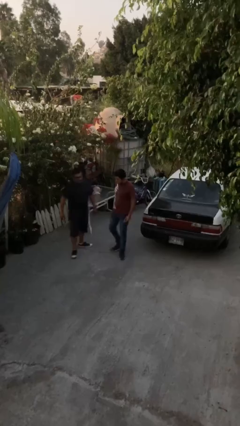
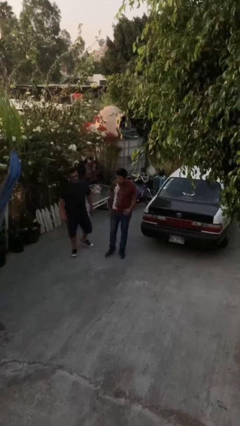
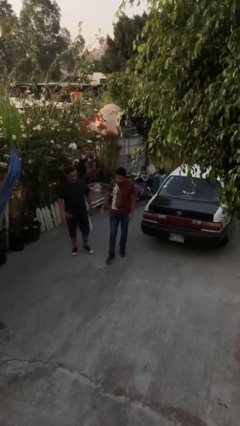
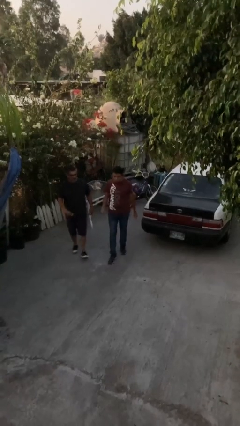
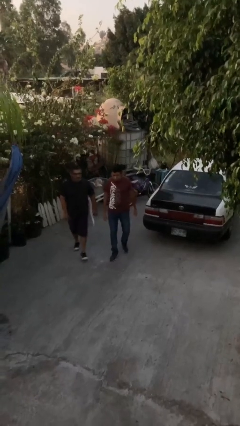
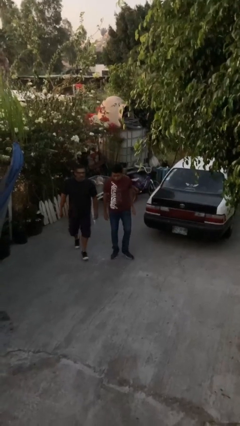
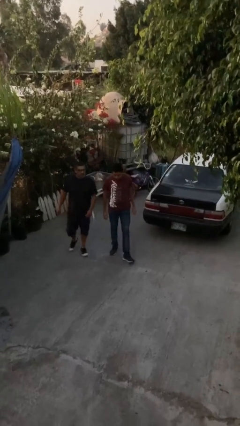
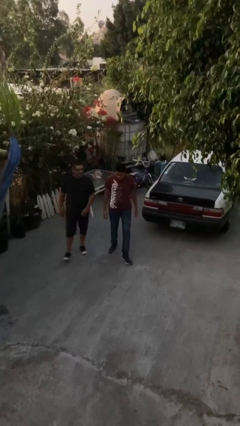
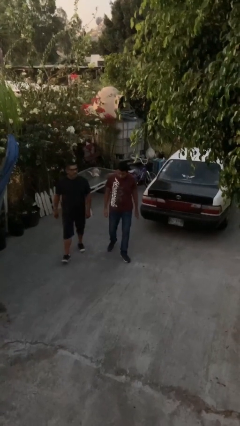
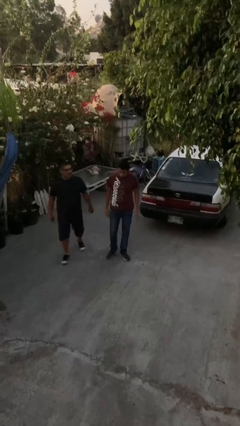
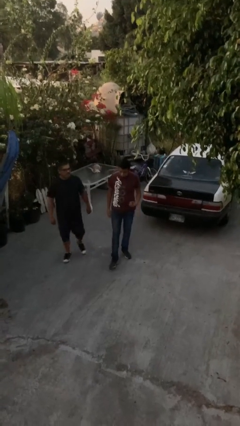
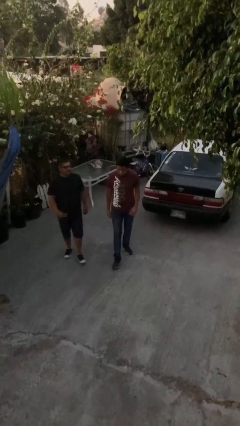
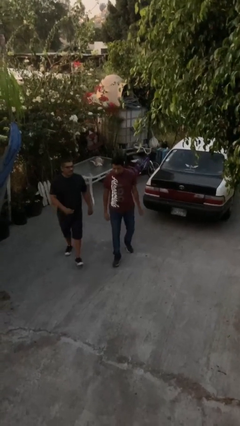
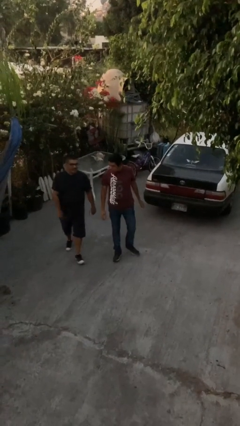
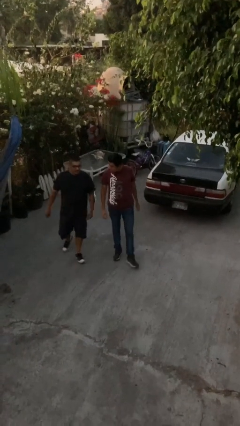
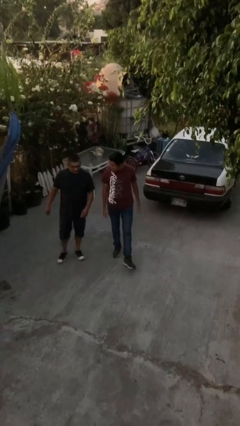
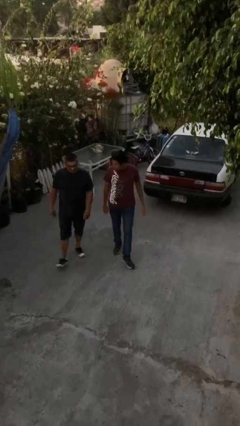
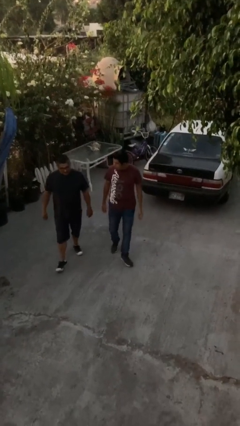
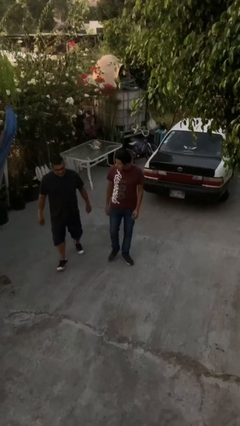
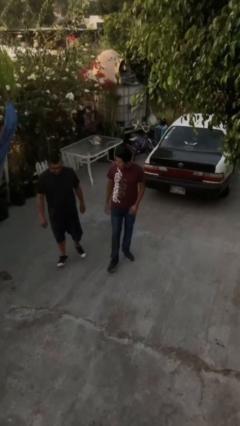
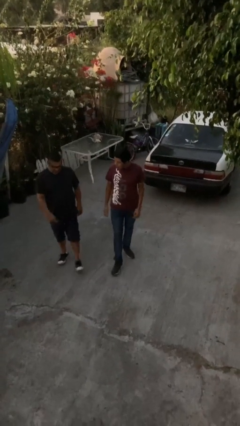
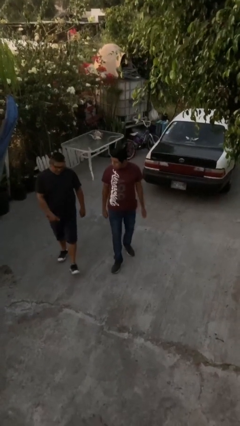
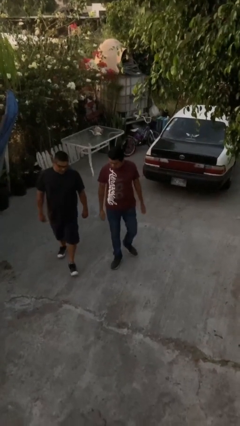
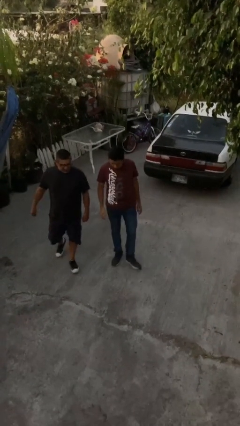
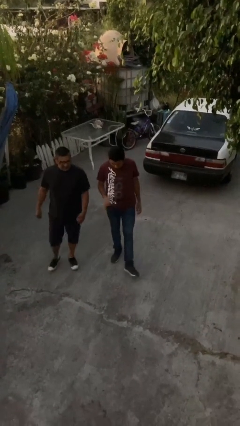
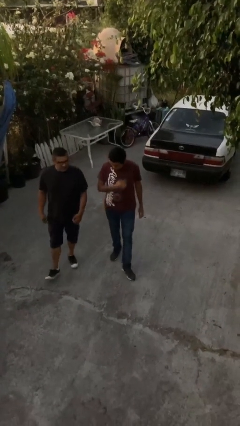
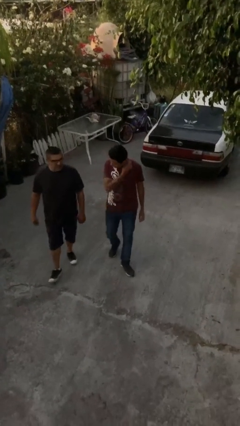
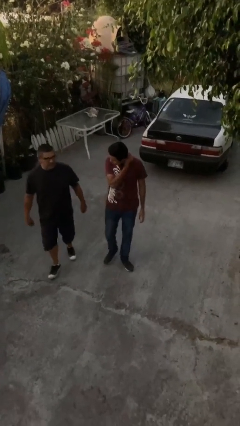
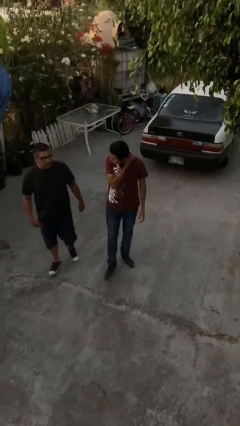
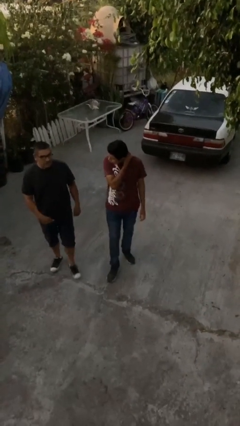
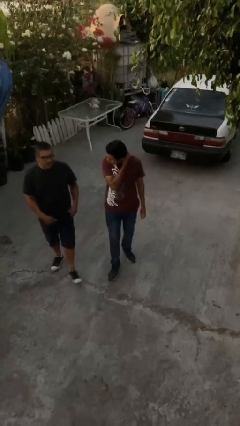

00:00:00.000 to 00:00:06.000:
person talks to person

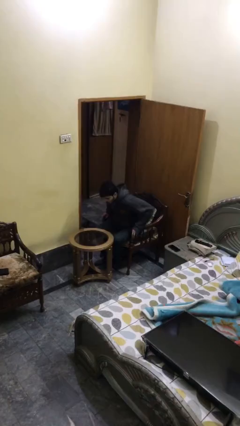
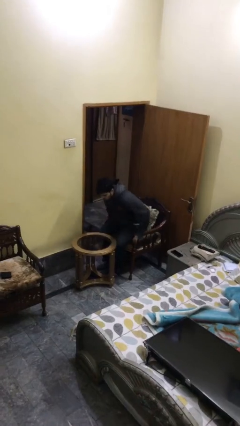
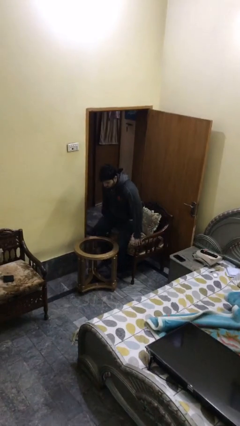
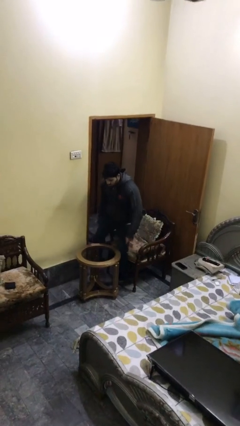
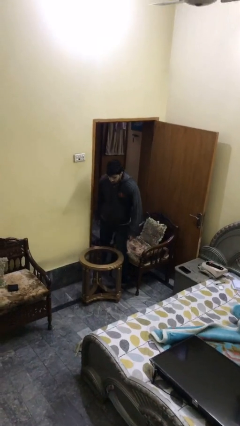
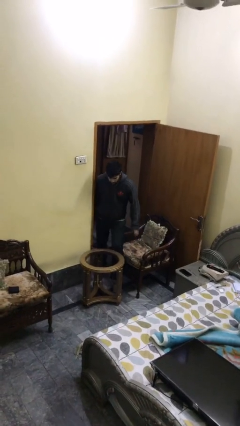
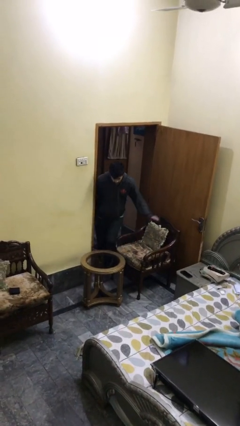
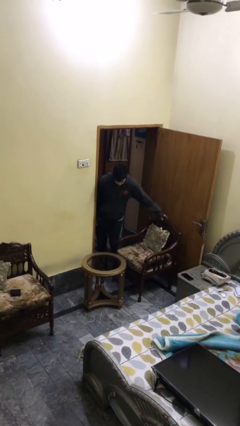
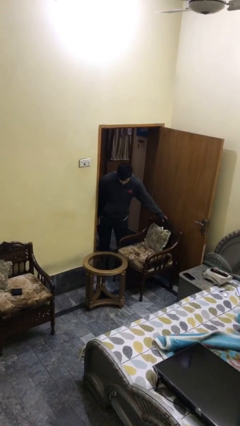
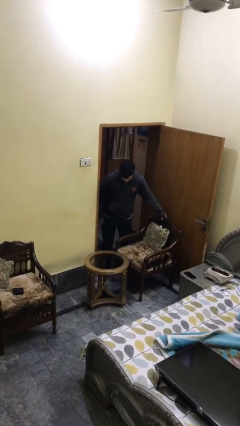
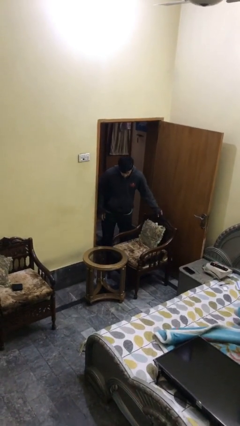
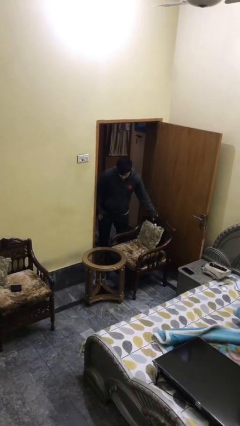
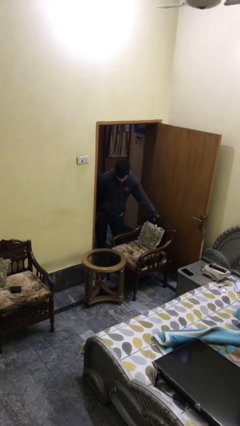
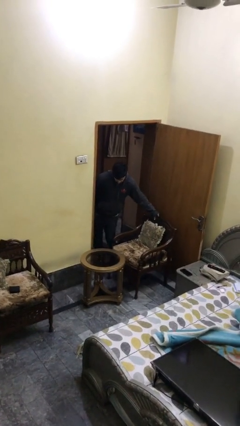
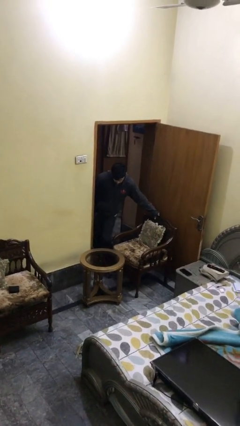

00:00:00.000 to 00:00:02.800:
person stands up

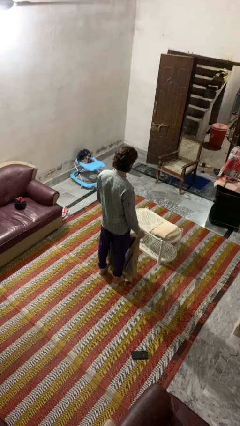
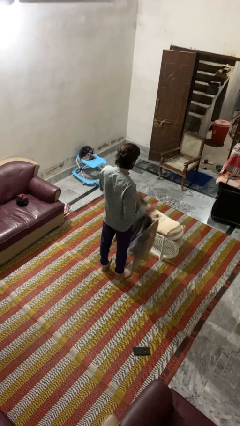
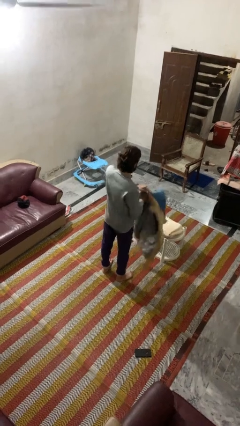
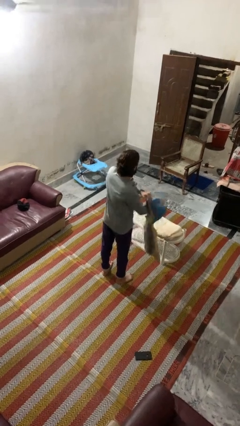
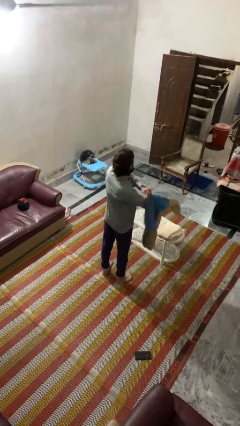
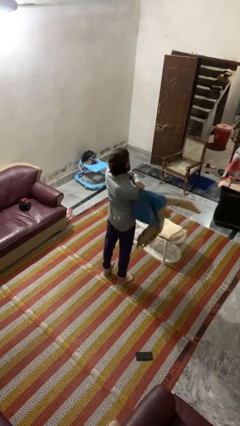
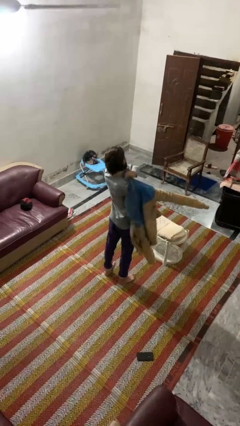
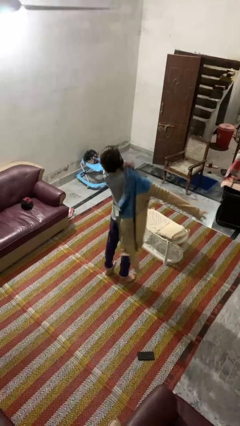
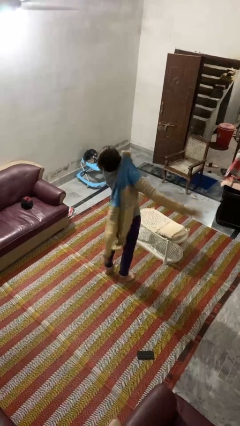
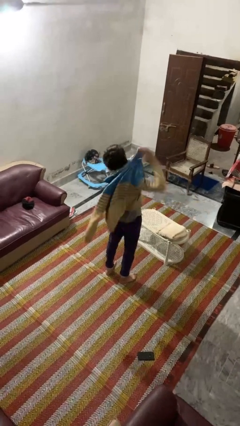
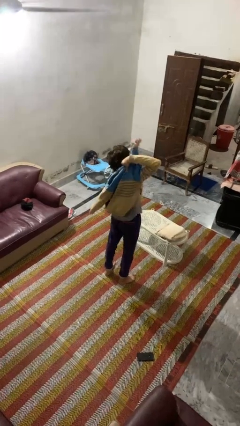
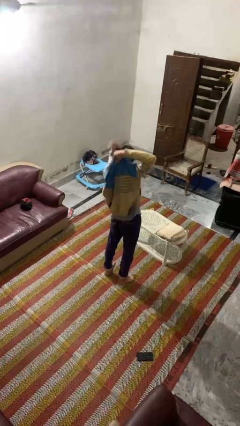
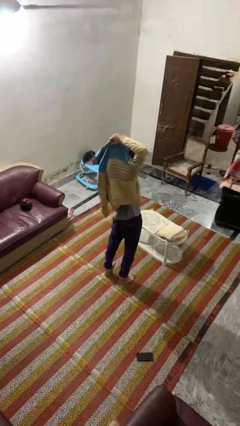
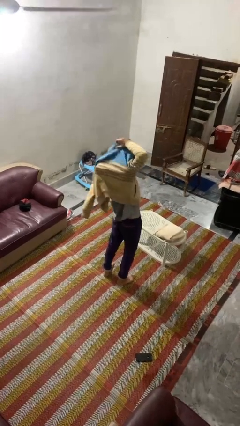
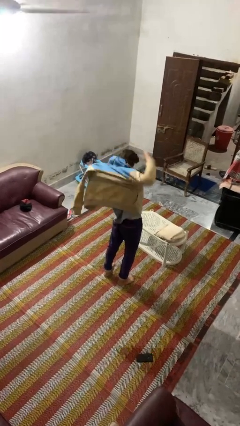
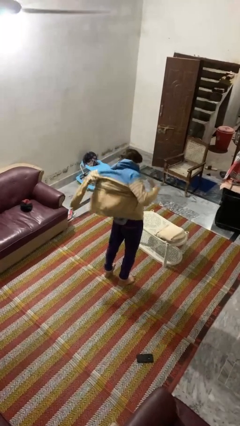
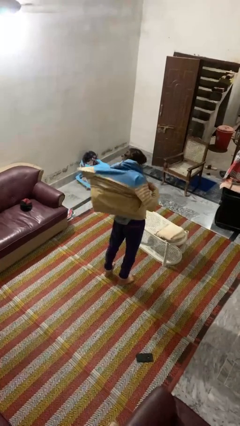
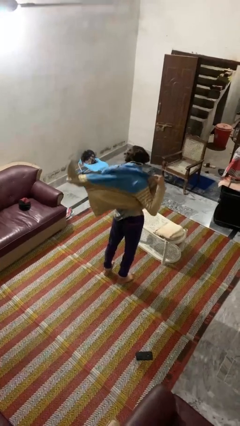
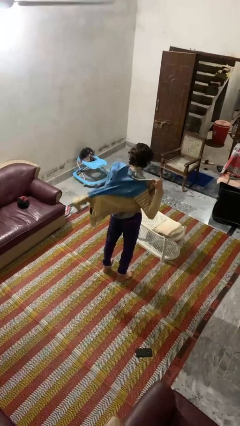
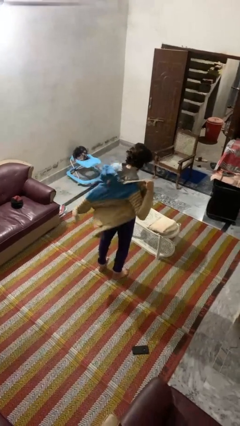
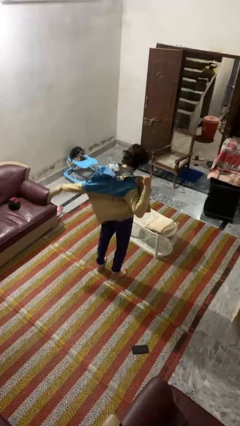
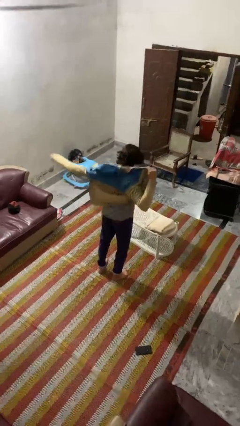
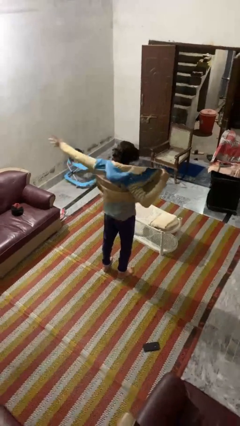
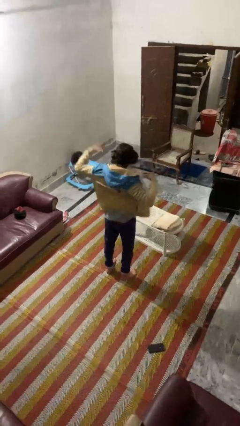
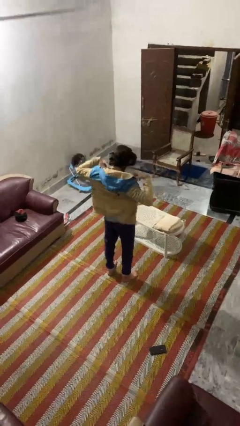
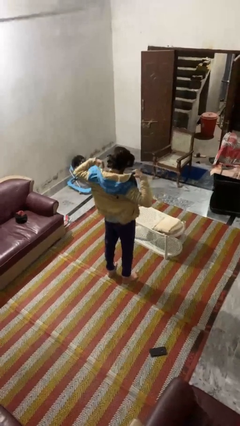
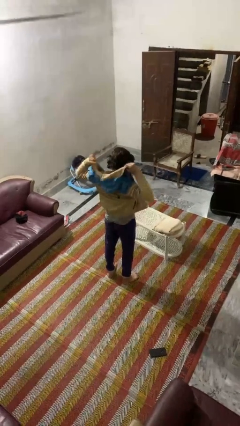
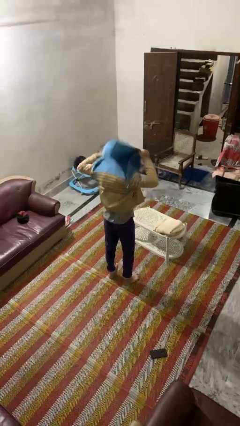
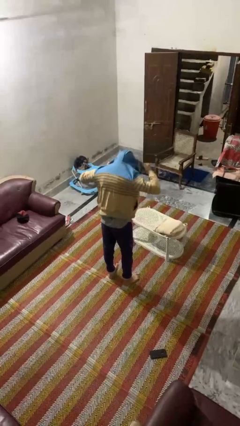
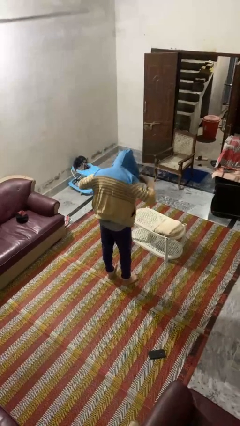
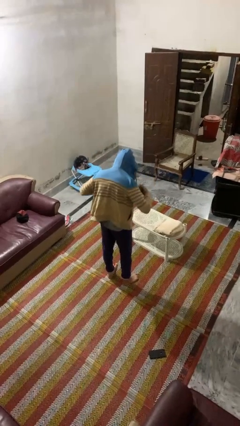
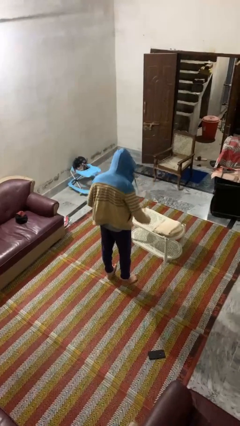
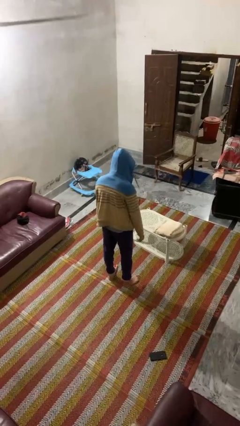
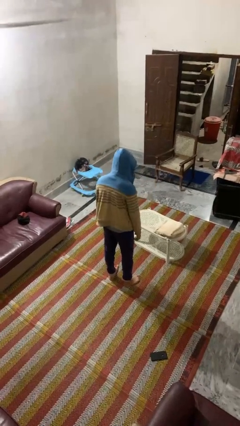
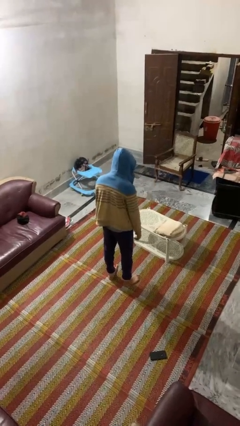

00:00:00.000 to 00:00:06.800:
person puts on hoodie

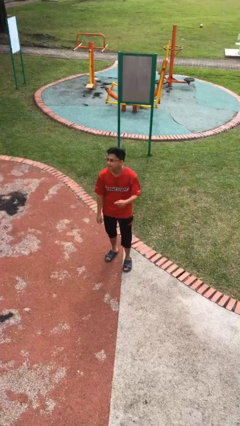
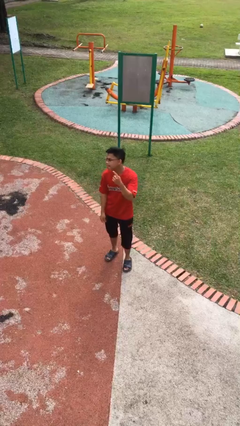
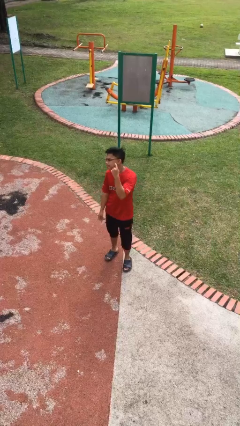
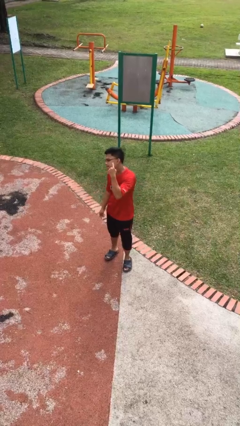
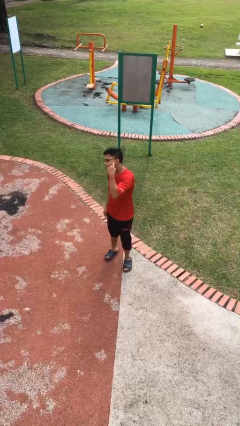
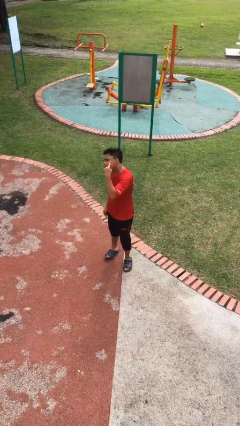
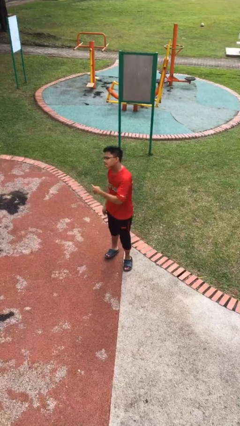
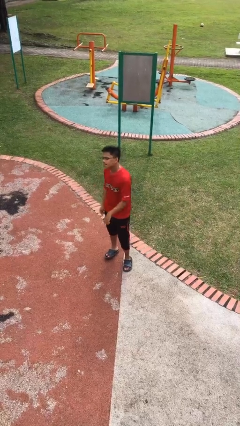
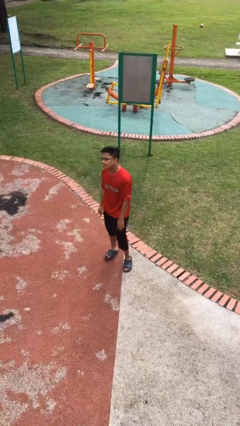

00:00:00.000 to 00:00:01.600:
person gestures listen closely

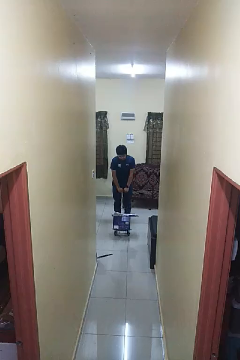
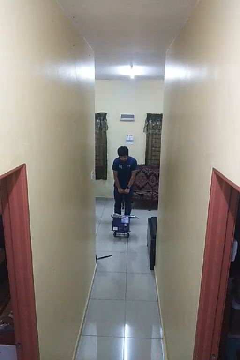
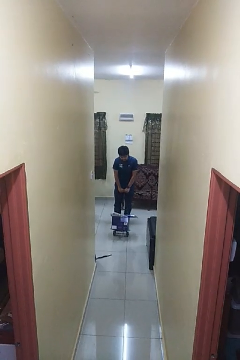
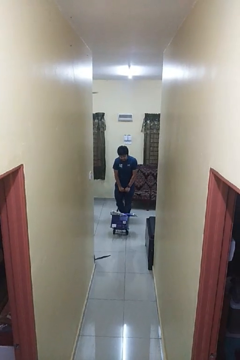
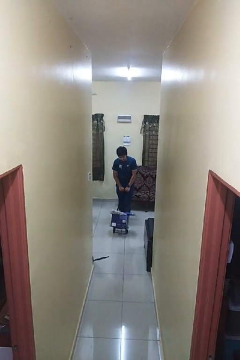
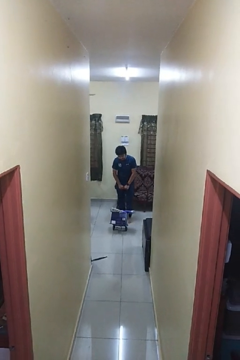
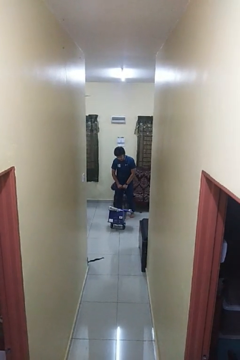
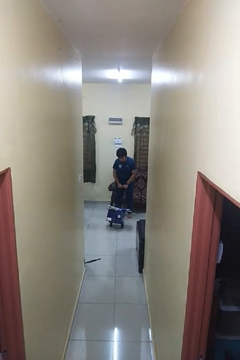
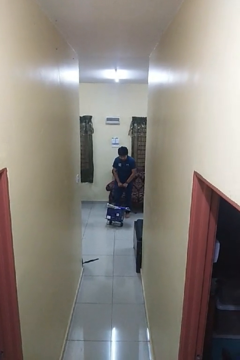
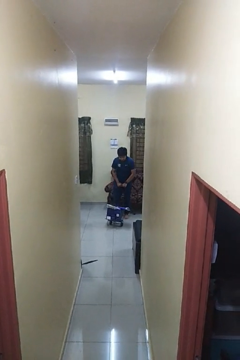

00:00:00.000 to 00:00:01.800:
person pulls wheeled cart
